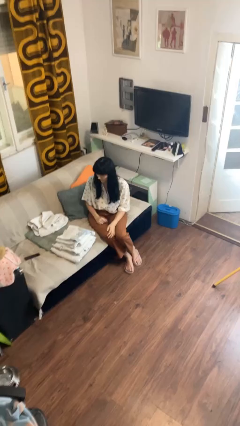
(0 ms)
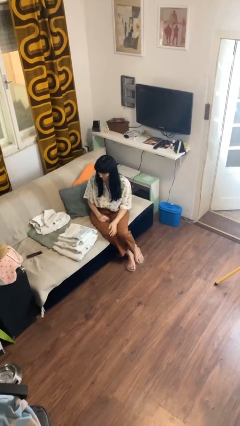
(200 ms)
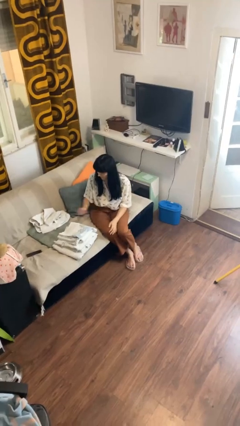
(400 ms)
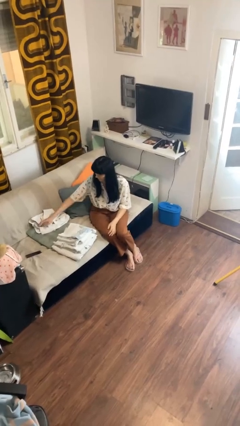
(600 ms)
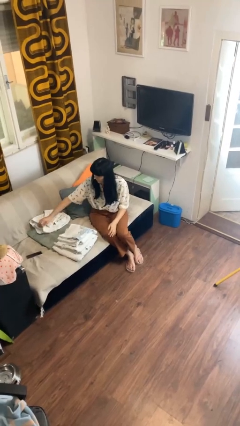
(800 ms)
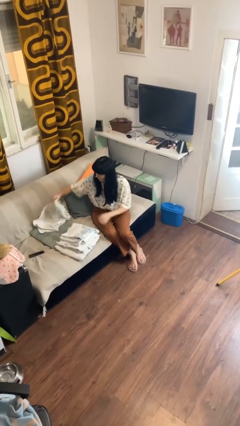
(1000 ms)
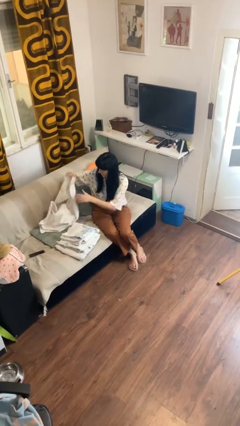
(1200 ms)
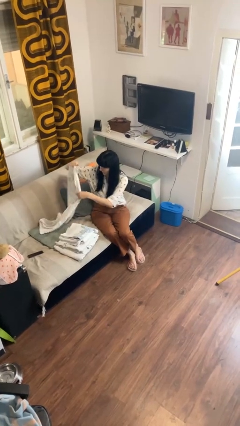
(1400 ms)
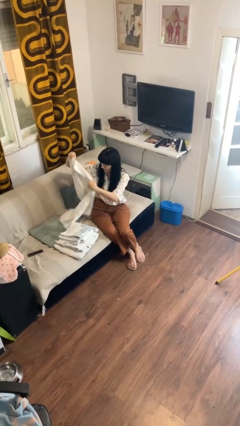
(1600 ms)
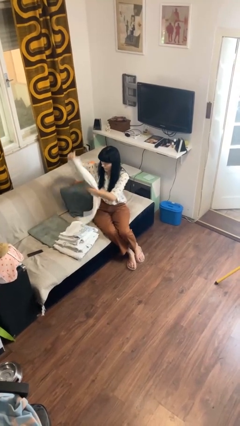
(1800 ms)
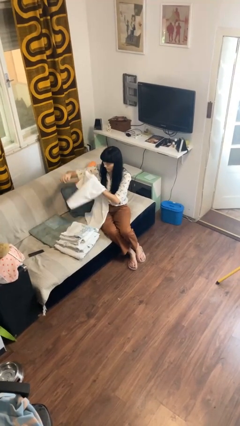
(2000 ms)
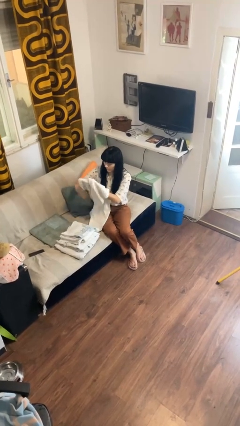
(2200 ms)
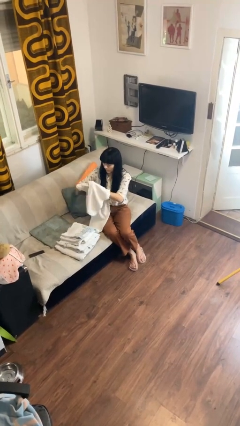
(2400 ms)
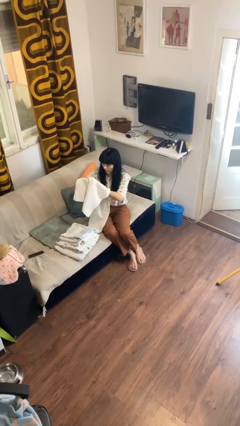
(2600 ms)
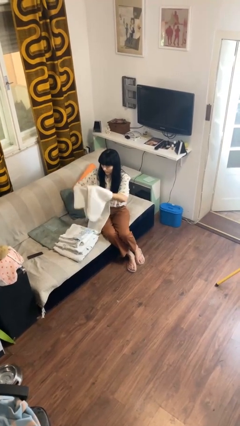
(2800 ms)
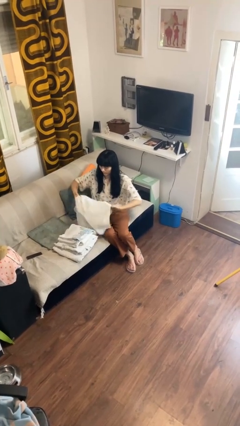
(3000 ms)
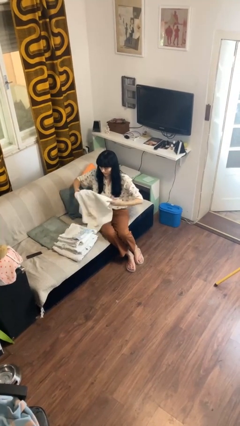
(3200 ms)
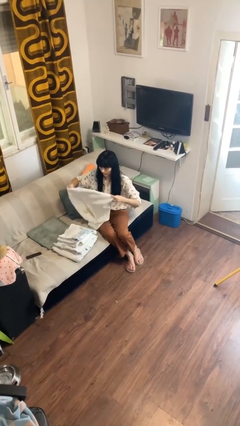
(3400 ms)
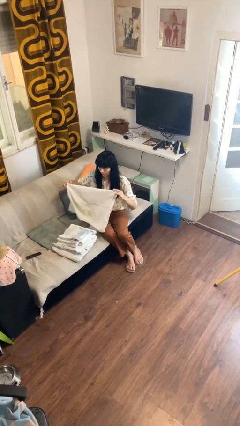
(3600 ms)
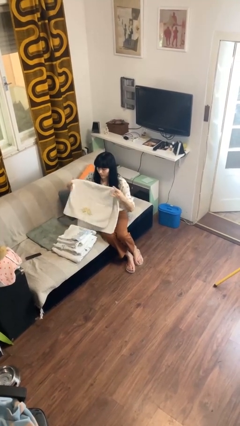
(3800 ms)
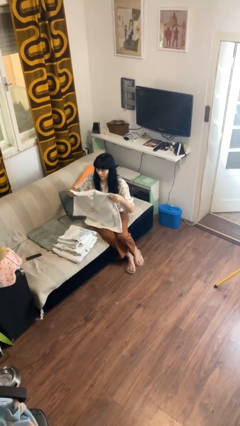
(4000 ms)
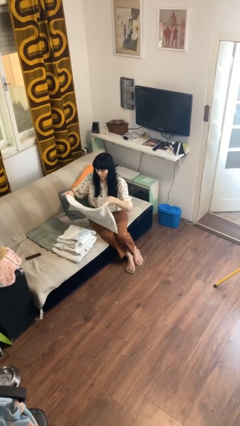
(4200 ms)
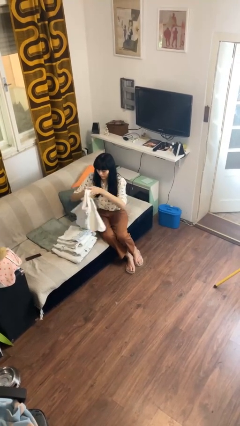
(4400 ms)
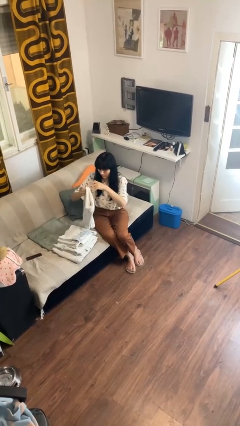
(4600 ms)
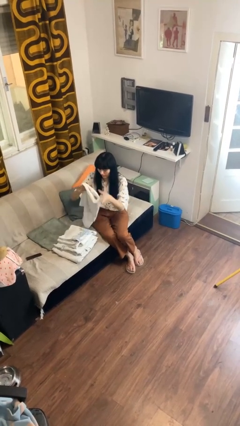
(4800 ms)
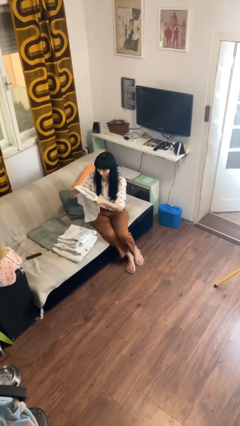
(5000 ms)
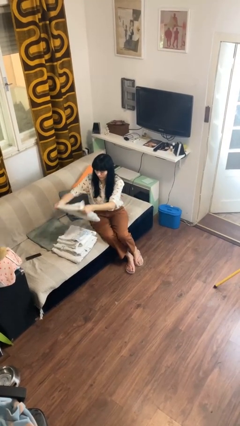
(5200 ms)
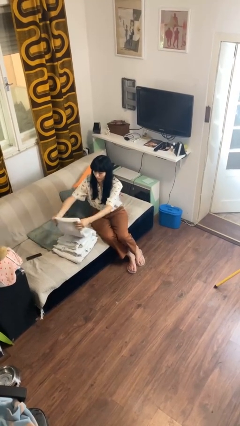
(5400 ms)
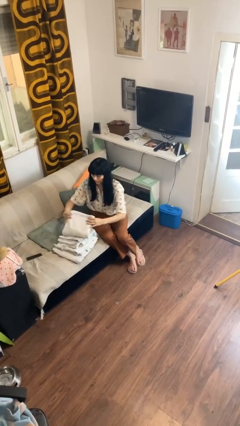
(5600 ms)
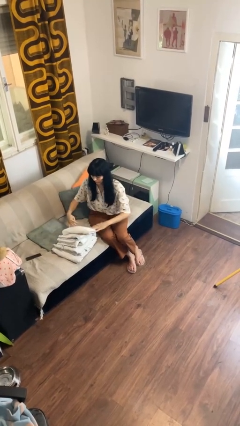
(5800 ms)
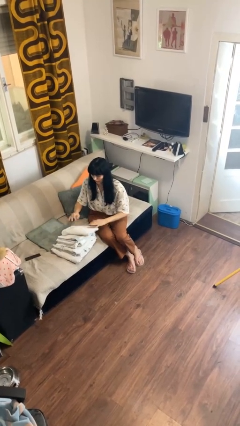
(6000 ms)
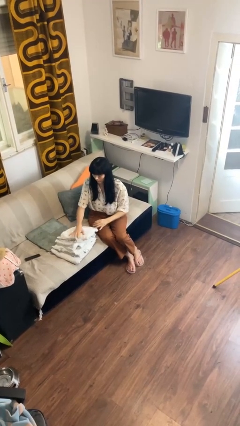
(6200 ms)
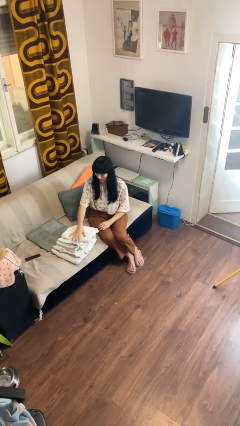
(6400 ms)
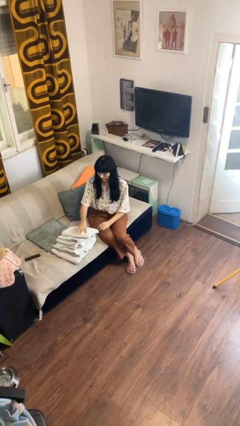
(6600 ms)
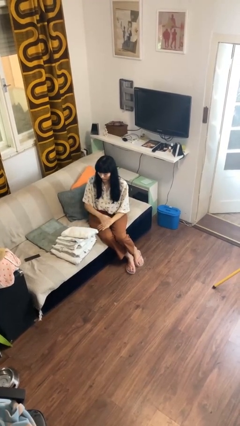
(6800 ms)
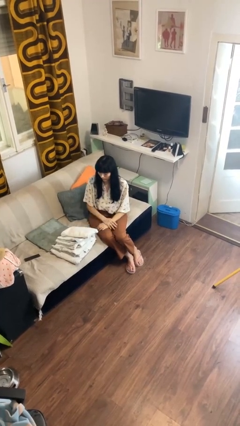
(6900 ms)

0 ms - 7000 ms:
person folds towel

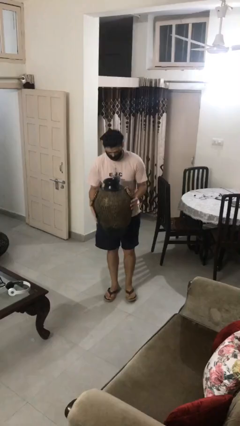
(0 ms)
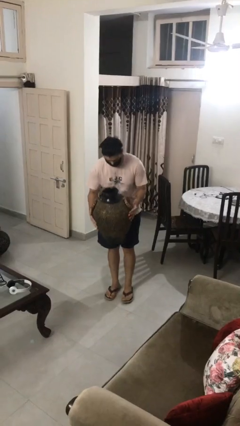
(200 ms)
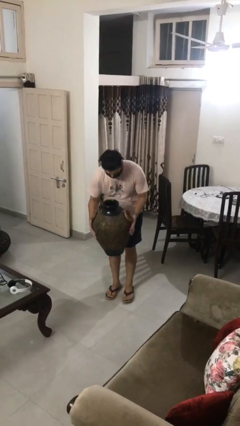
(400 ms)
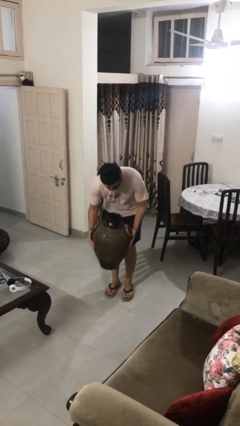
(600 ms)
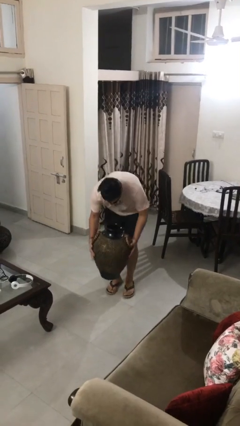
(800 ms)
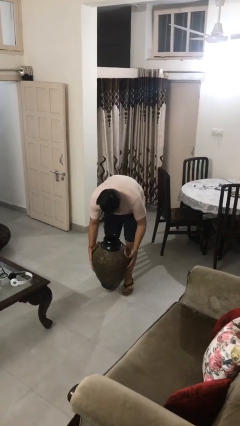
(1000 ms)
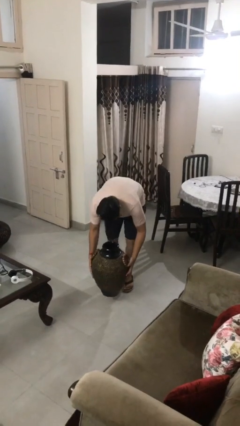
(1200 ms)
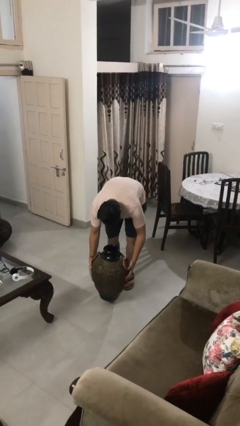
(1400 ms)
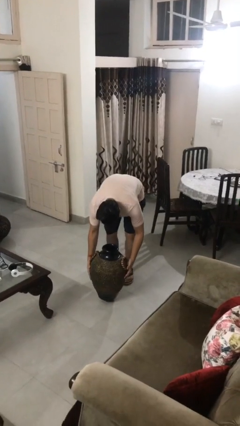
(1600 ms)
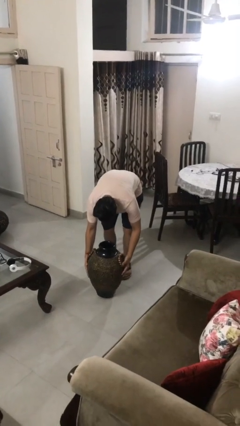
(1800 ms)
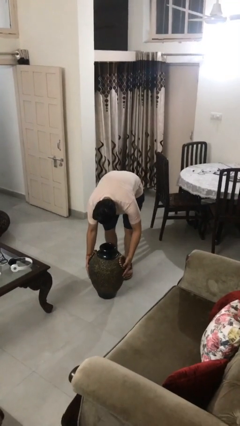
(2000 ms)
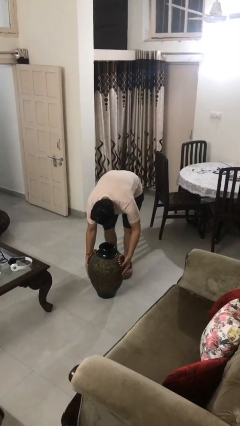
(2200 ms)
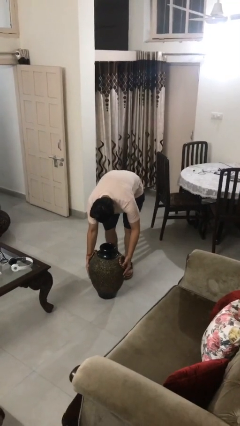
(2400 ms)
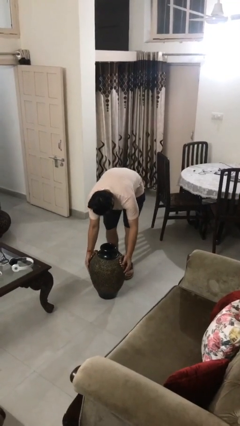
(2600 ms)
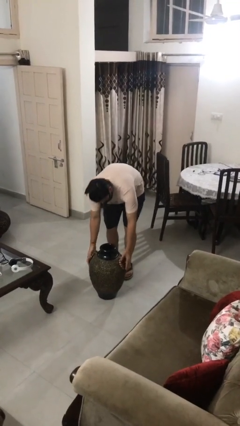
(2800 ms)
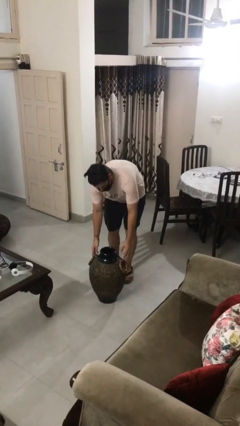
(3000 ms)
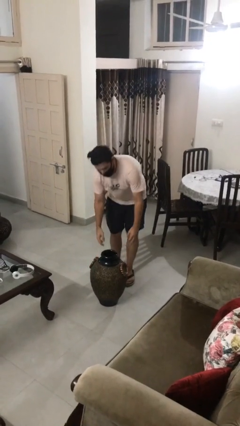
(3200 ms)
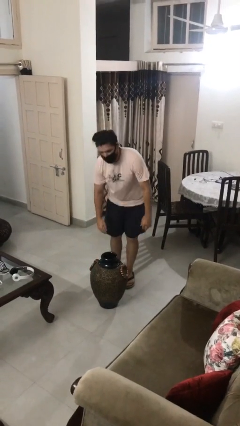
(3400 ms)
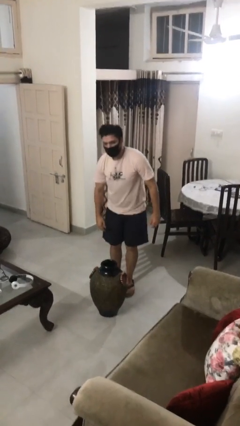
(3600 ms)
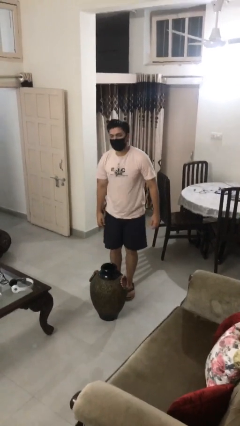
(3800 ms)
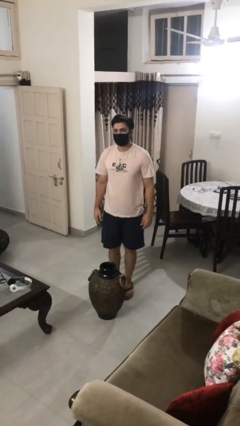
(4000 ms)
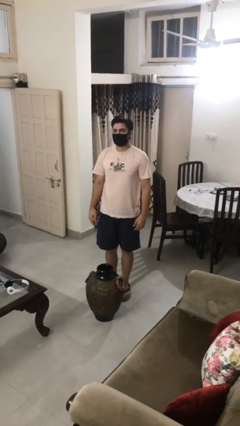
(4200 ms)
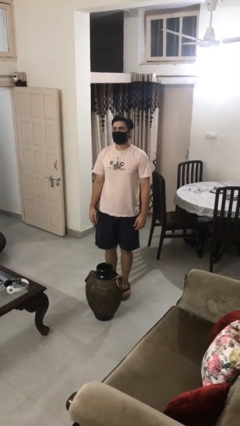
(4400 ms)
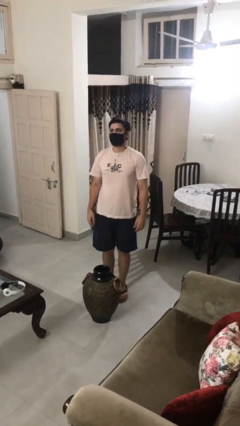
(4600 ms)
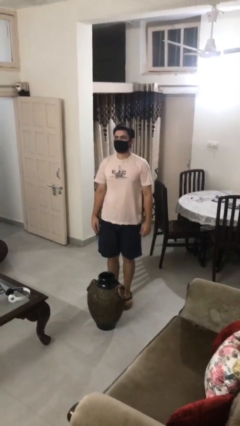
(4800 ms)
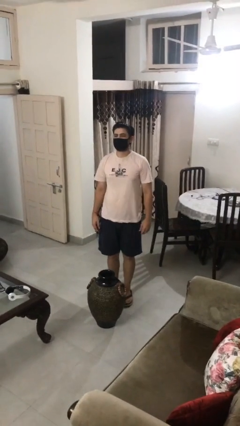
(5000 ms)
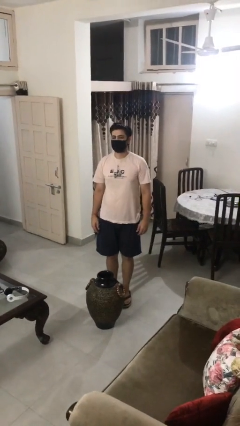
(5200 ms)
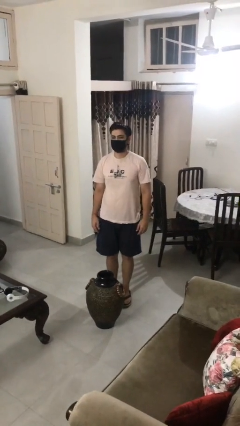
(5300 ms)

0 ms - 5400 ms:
person puts down object on floor

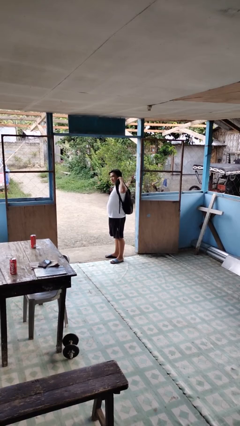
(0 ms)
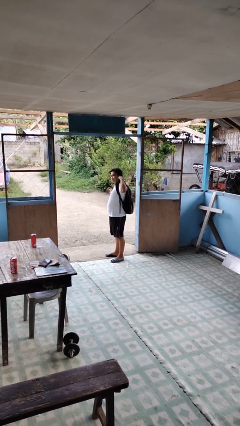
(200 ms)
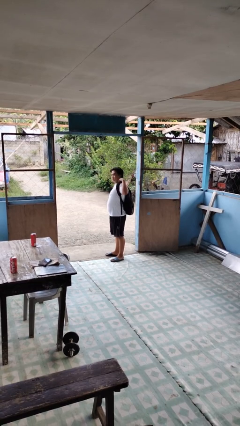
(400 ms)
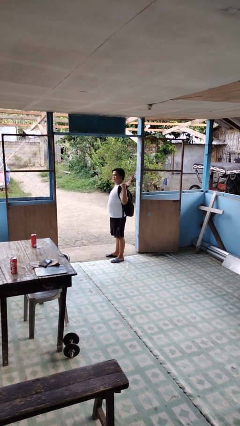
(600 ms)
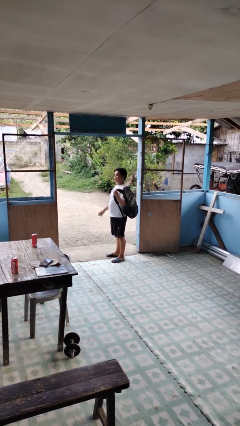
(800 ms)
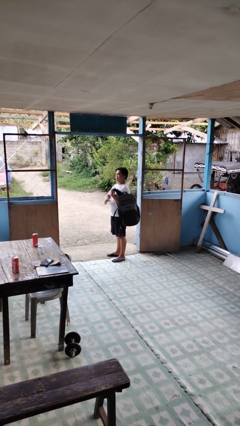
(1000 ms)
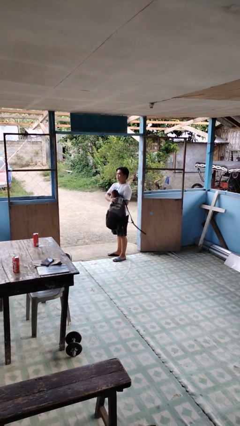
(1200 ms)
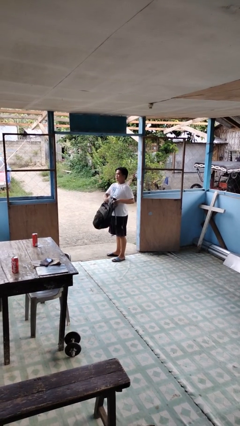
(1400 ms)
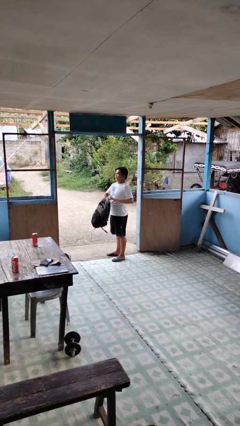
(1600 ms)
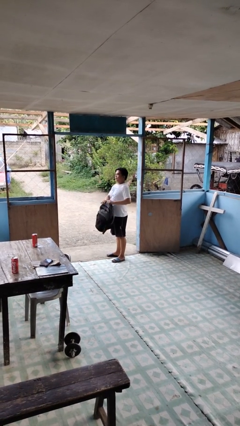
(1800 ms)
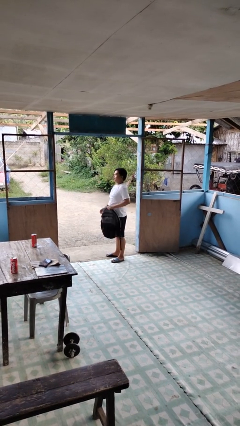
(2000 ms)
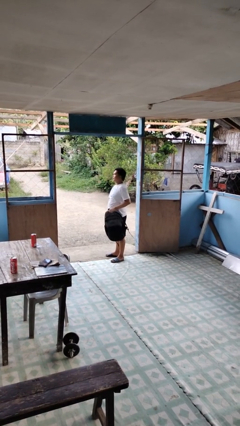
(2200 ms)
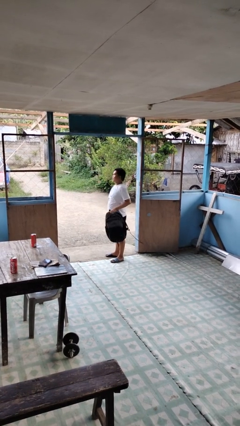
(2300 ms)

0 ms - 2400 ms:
person takes off backpack

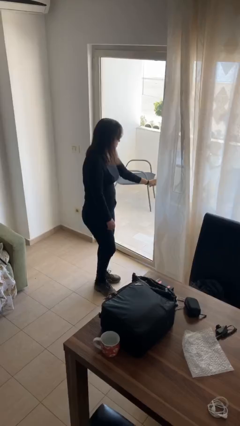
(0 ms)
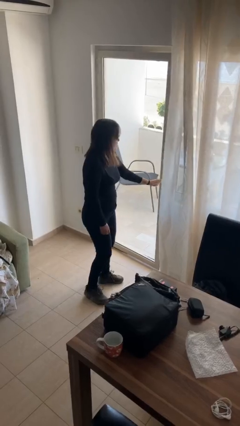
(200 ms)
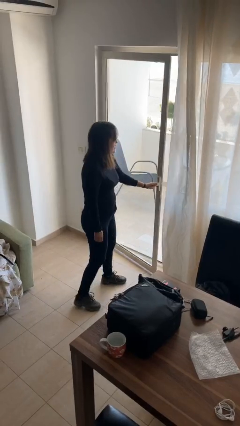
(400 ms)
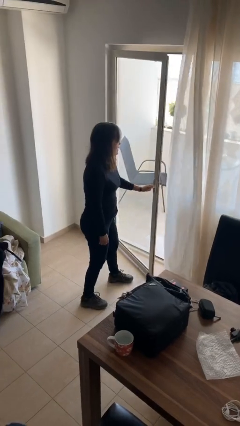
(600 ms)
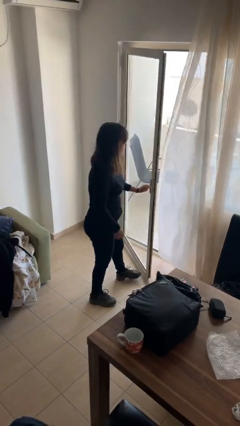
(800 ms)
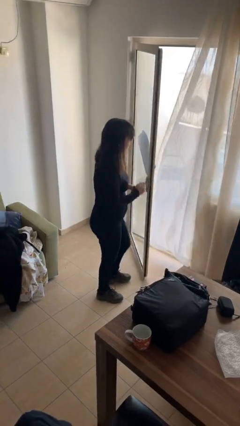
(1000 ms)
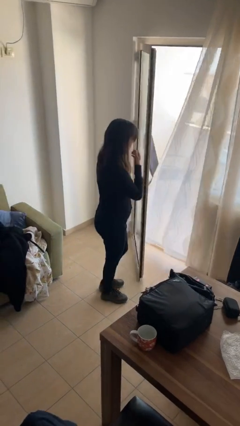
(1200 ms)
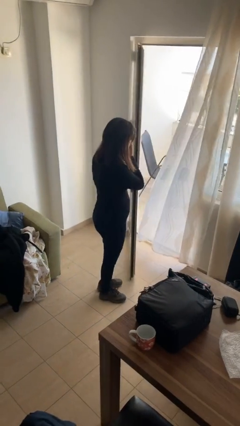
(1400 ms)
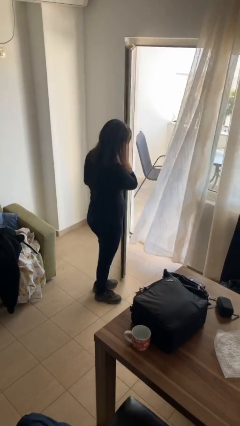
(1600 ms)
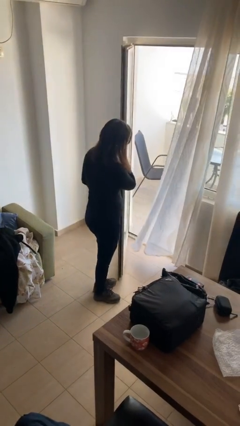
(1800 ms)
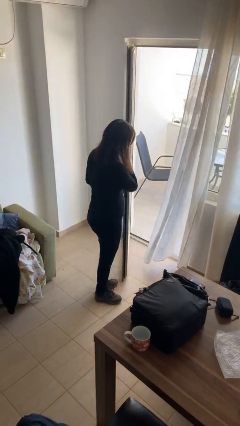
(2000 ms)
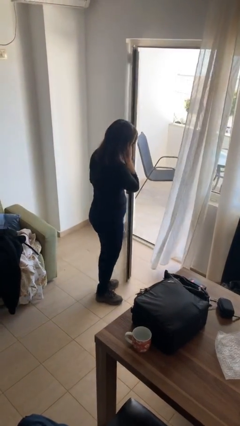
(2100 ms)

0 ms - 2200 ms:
person opens facility door
